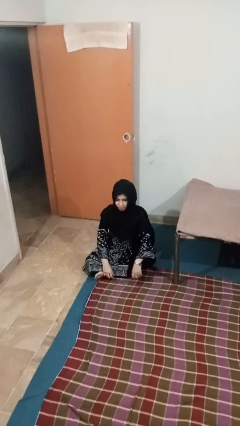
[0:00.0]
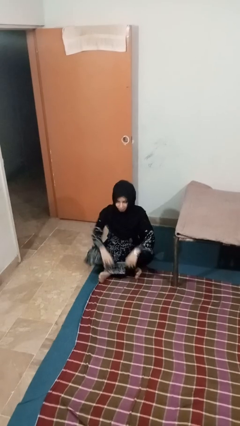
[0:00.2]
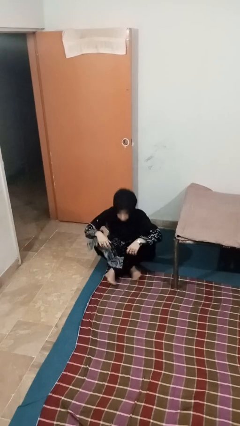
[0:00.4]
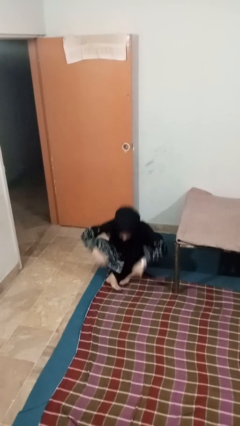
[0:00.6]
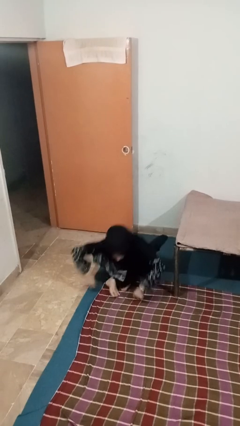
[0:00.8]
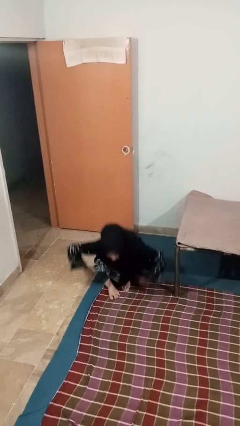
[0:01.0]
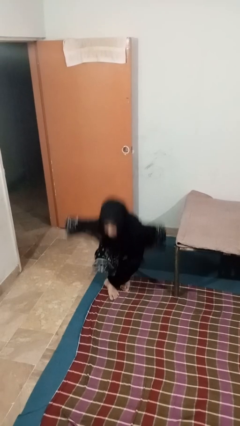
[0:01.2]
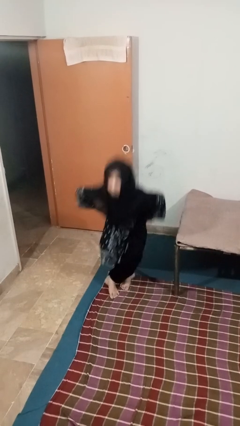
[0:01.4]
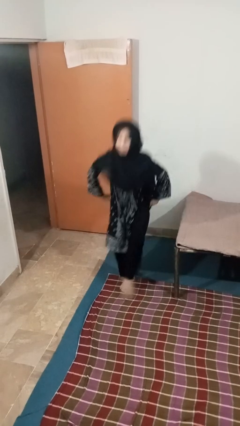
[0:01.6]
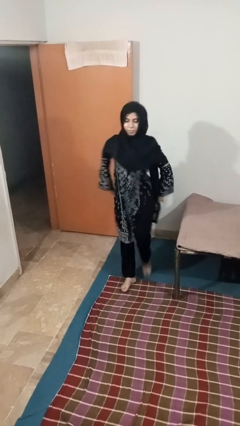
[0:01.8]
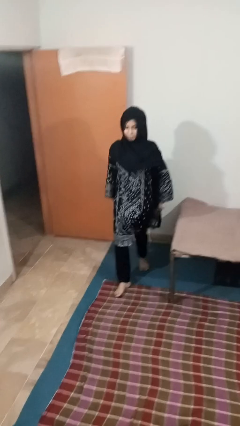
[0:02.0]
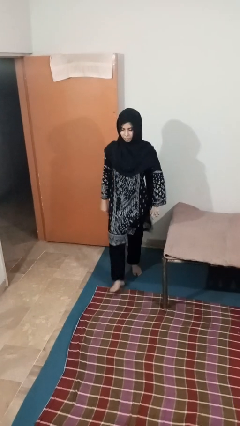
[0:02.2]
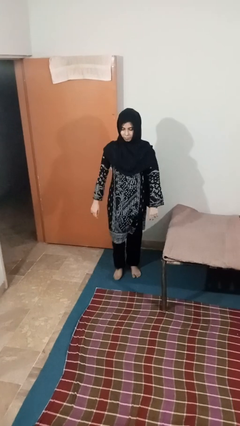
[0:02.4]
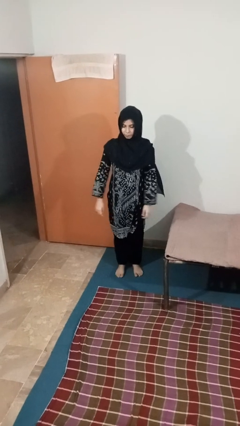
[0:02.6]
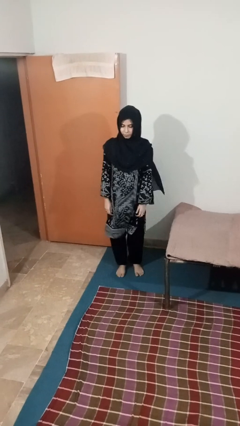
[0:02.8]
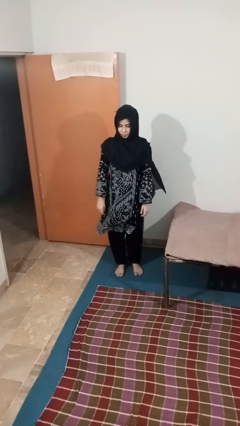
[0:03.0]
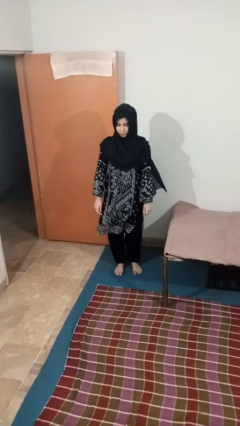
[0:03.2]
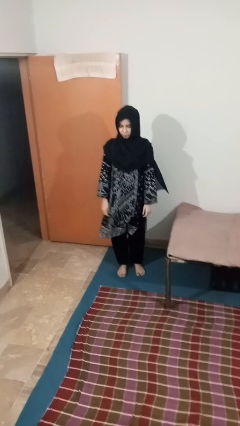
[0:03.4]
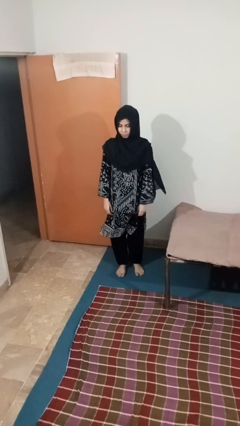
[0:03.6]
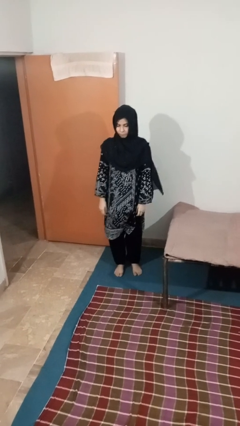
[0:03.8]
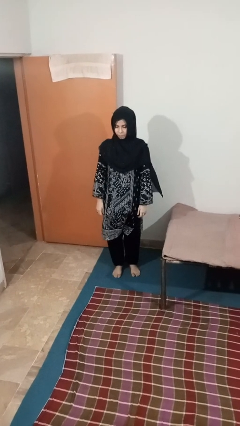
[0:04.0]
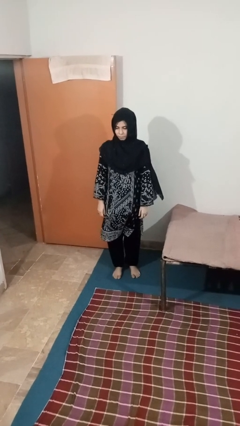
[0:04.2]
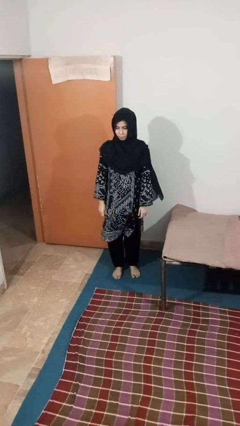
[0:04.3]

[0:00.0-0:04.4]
person stands up from floor

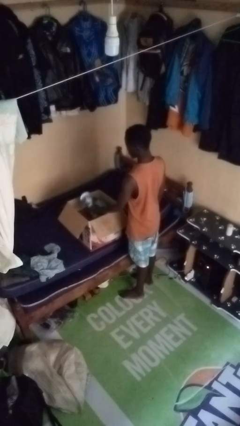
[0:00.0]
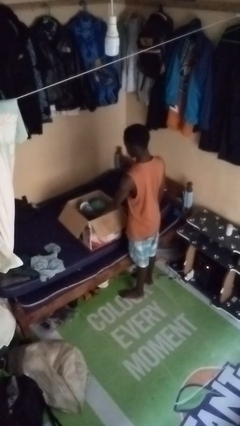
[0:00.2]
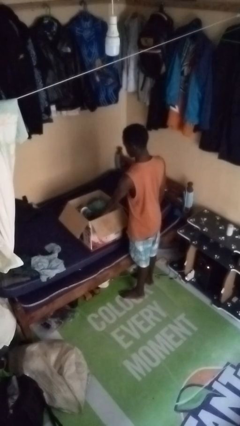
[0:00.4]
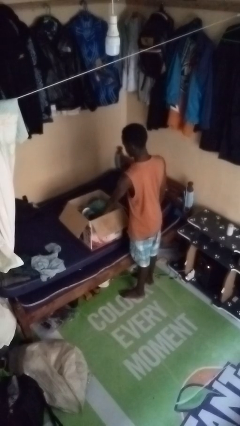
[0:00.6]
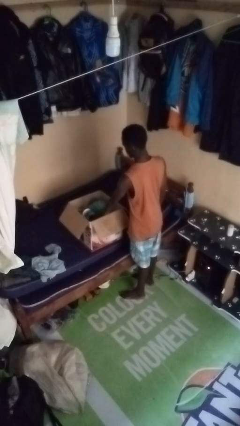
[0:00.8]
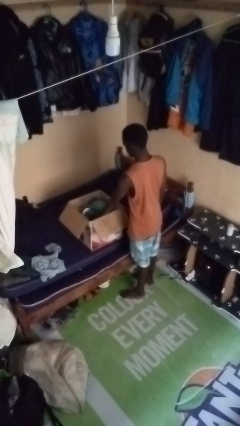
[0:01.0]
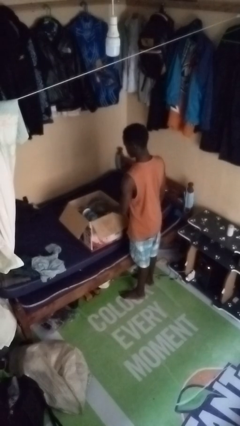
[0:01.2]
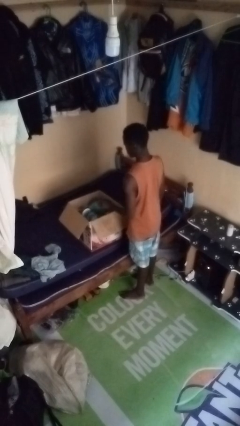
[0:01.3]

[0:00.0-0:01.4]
person puts object into box

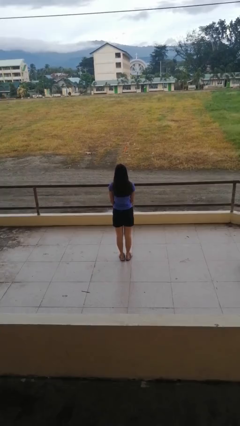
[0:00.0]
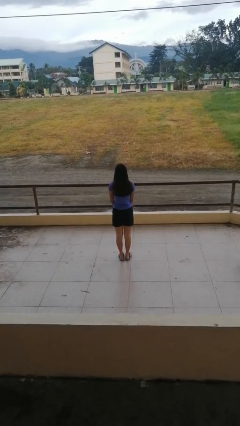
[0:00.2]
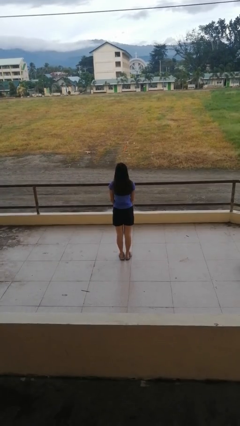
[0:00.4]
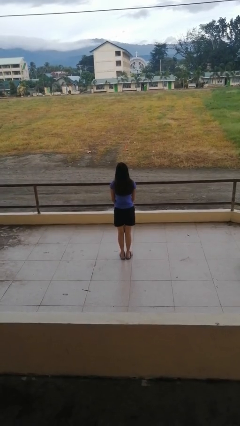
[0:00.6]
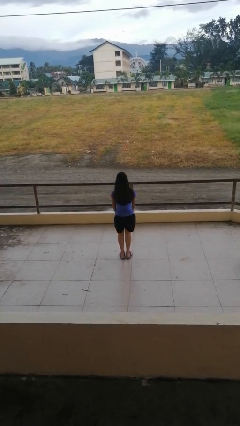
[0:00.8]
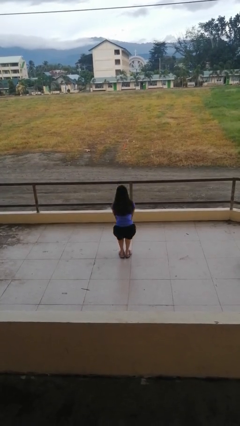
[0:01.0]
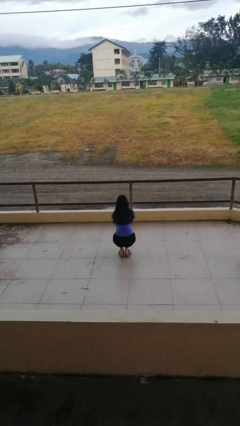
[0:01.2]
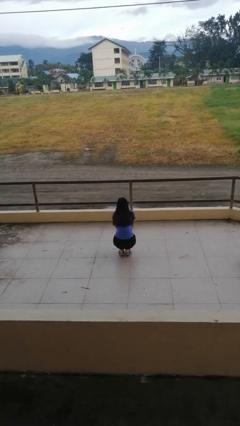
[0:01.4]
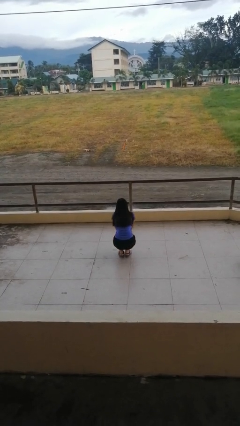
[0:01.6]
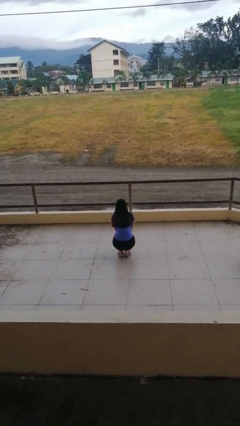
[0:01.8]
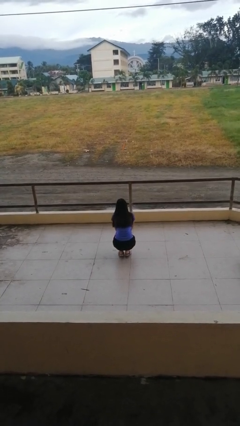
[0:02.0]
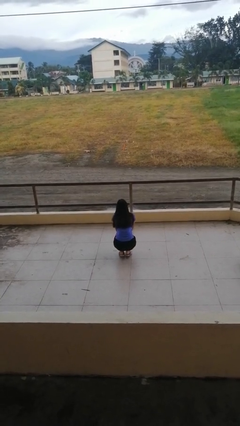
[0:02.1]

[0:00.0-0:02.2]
person squats

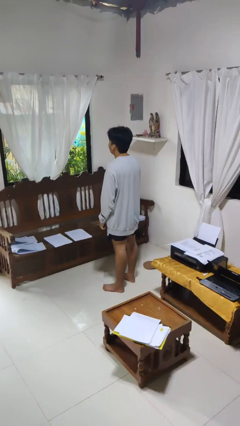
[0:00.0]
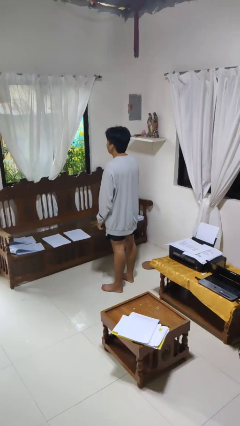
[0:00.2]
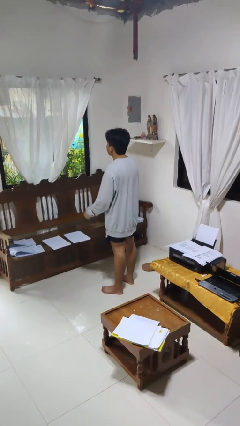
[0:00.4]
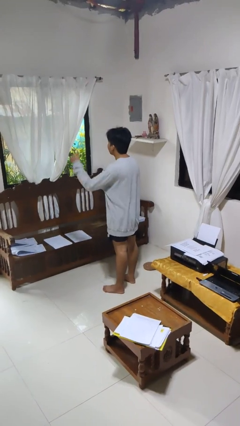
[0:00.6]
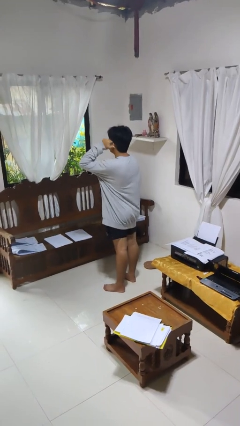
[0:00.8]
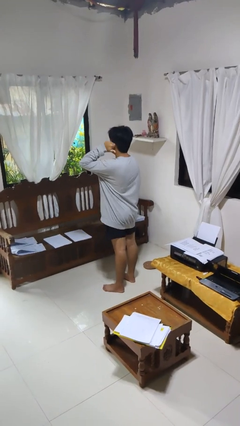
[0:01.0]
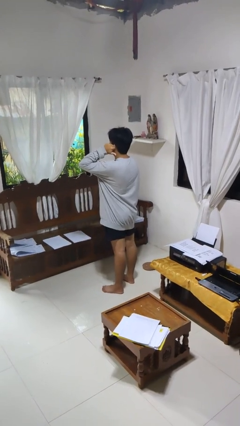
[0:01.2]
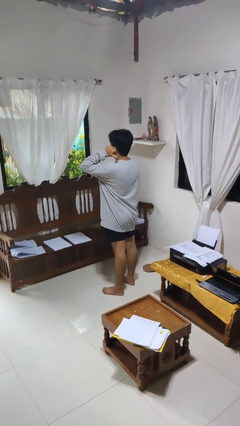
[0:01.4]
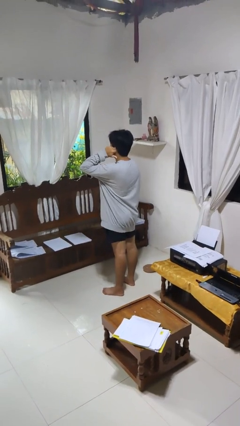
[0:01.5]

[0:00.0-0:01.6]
person gestures behind me

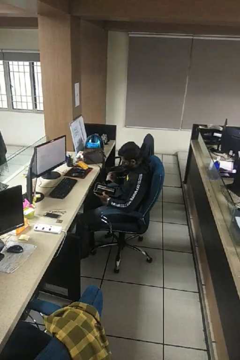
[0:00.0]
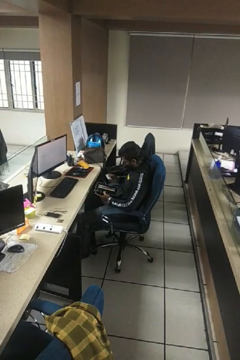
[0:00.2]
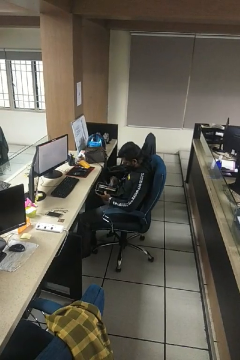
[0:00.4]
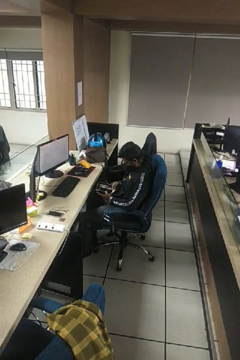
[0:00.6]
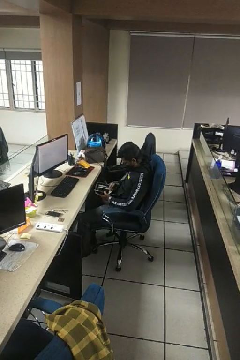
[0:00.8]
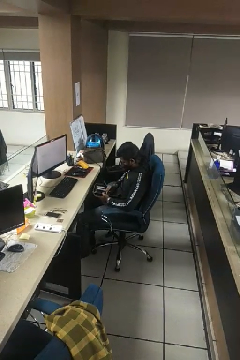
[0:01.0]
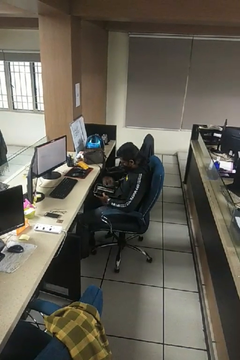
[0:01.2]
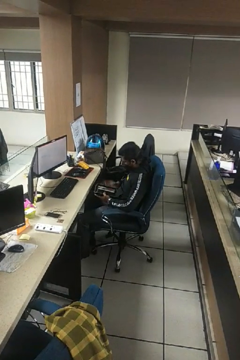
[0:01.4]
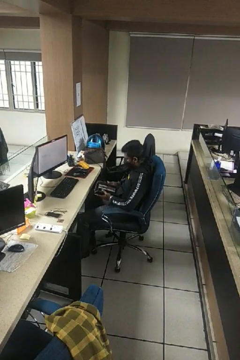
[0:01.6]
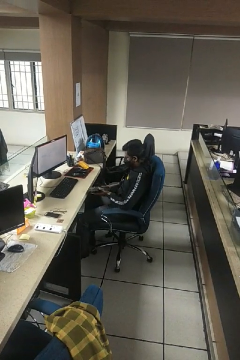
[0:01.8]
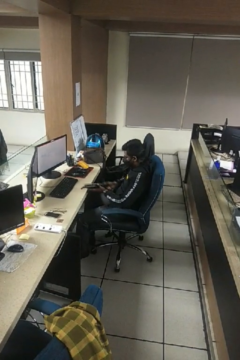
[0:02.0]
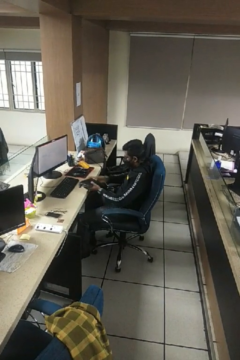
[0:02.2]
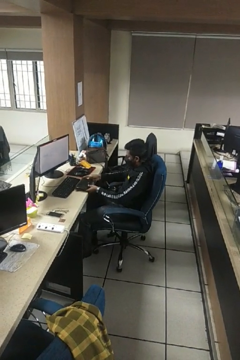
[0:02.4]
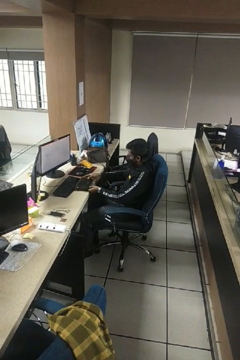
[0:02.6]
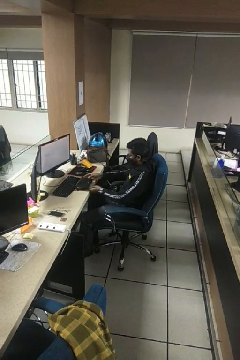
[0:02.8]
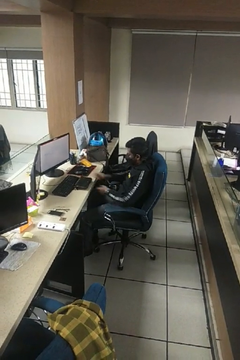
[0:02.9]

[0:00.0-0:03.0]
person puts object into purse

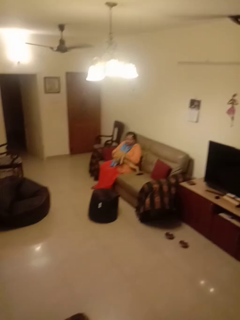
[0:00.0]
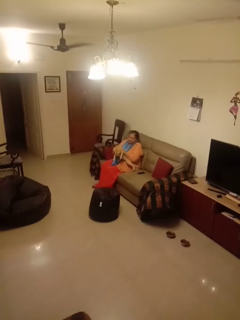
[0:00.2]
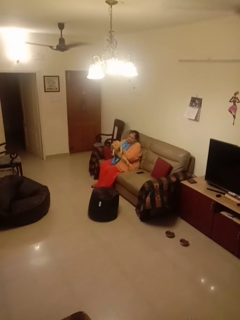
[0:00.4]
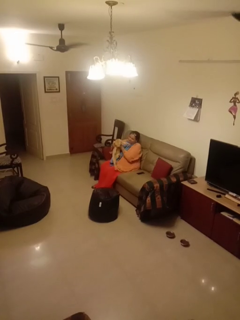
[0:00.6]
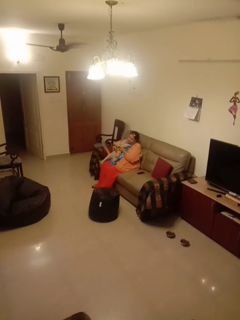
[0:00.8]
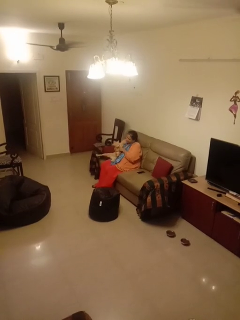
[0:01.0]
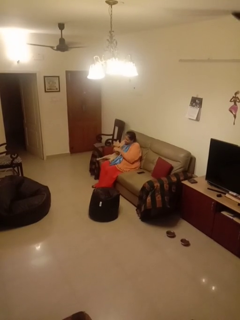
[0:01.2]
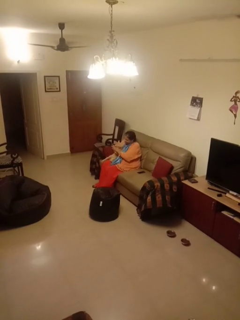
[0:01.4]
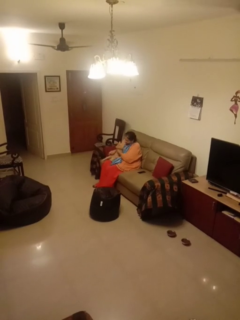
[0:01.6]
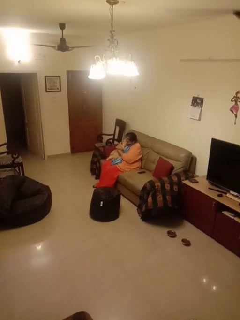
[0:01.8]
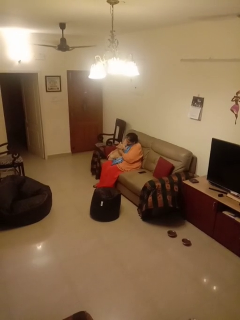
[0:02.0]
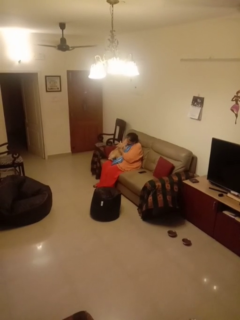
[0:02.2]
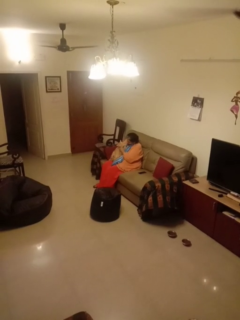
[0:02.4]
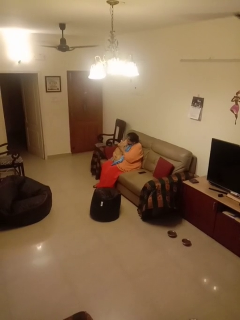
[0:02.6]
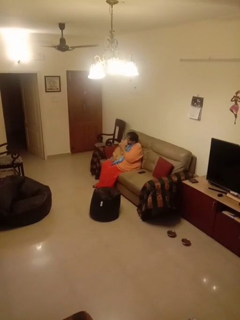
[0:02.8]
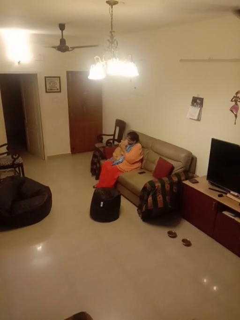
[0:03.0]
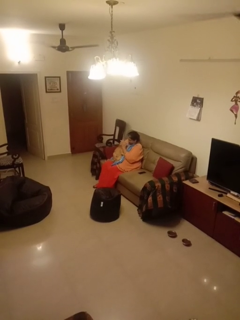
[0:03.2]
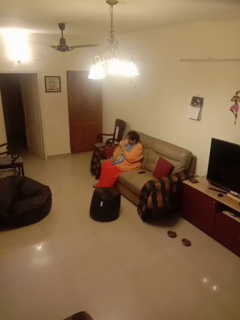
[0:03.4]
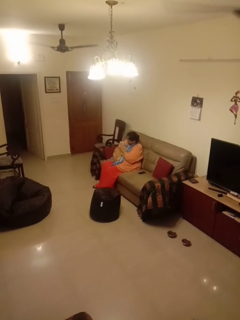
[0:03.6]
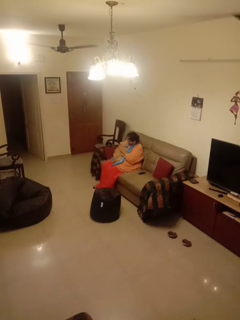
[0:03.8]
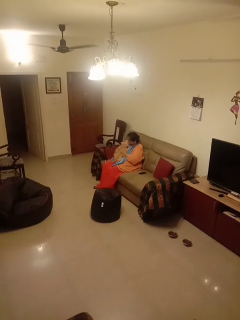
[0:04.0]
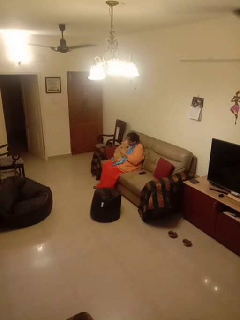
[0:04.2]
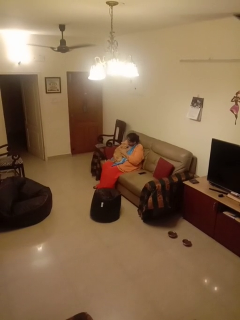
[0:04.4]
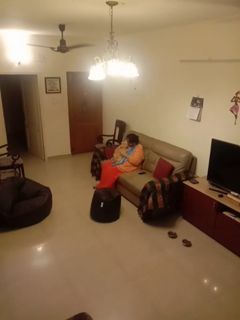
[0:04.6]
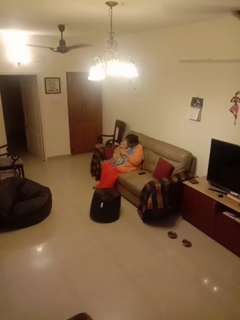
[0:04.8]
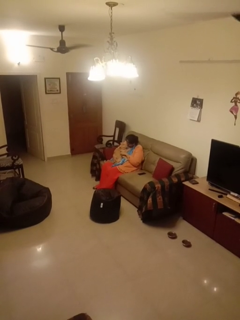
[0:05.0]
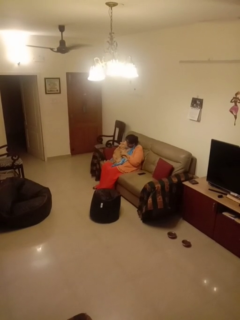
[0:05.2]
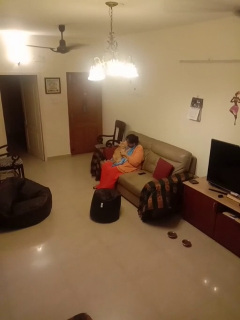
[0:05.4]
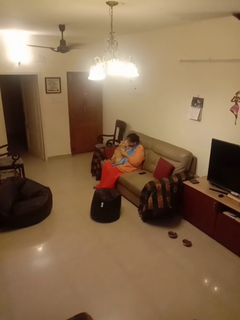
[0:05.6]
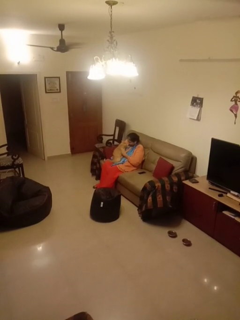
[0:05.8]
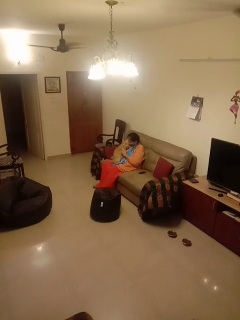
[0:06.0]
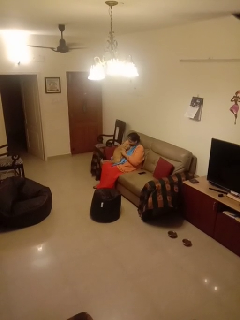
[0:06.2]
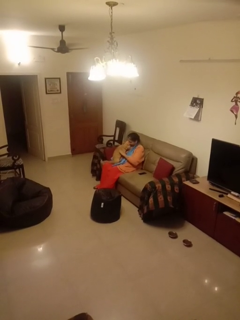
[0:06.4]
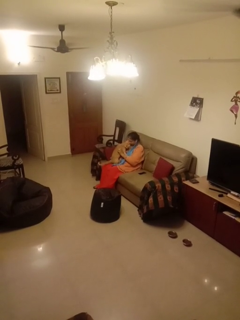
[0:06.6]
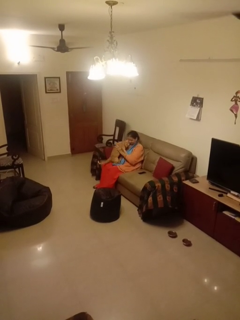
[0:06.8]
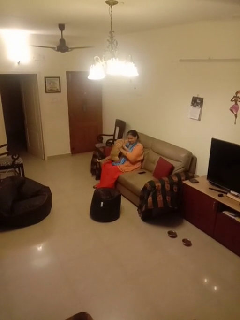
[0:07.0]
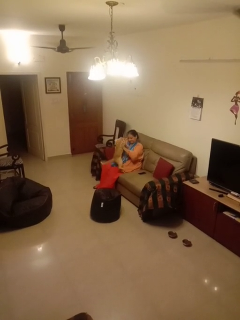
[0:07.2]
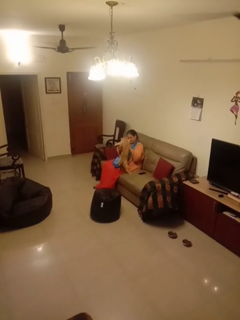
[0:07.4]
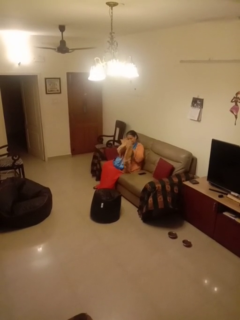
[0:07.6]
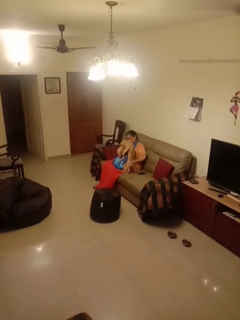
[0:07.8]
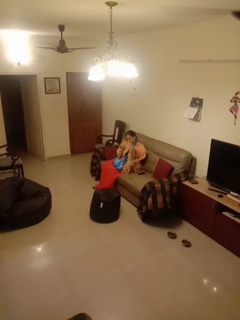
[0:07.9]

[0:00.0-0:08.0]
person hugs cat
